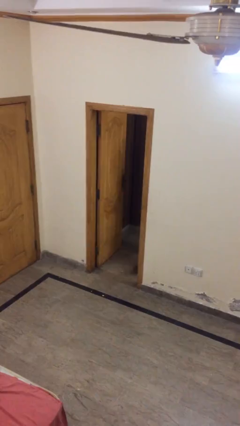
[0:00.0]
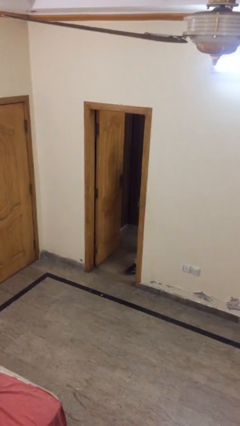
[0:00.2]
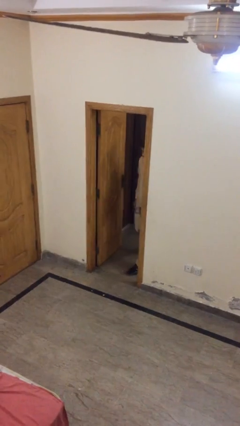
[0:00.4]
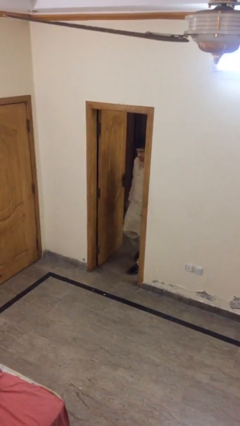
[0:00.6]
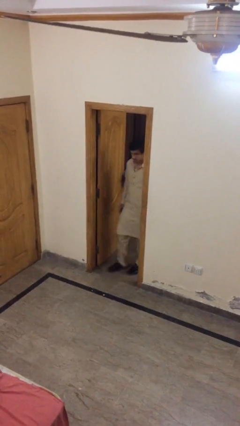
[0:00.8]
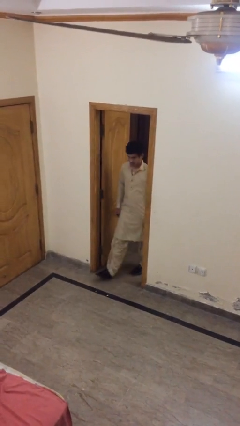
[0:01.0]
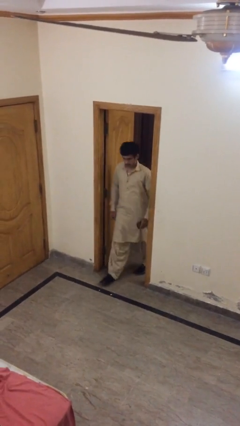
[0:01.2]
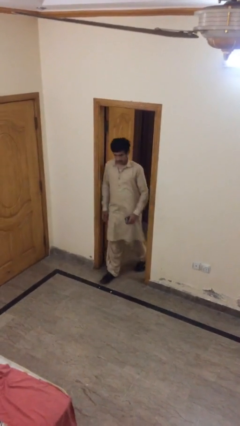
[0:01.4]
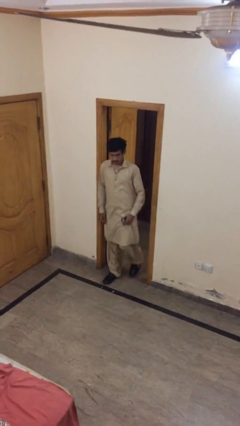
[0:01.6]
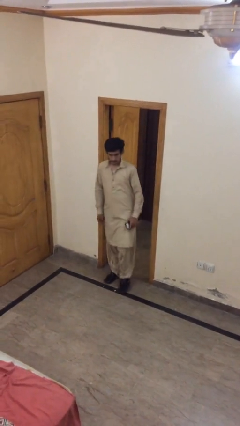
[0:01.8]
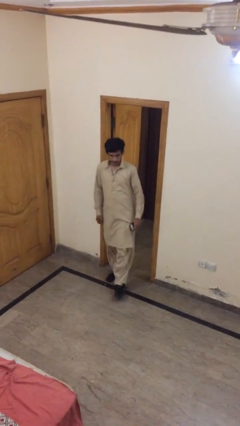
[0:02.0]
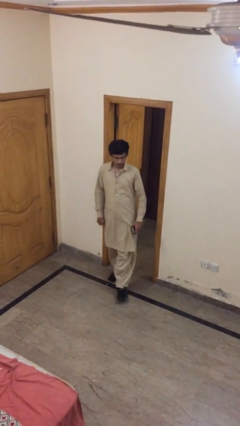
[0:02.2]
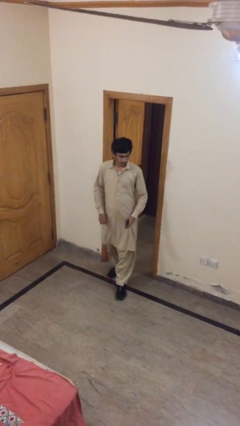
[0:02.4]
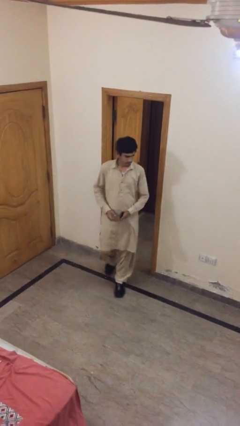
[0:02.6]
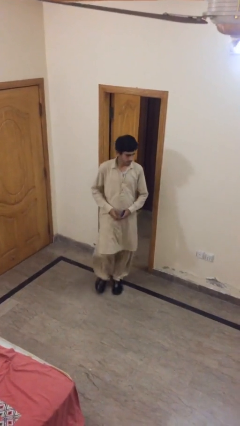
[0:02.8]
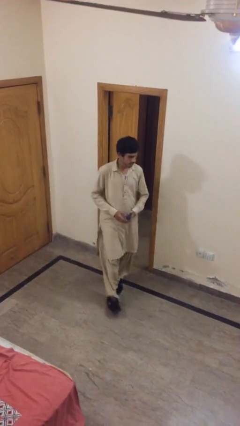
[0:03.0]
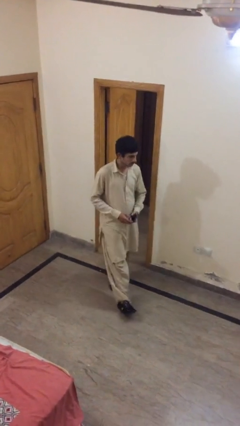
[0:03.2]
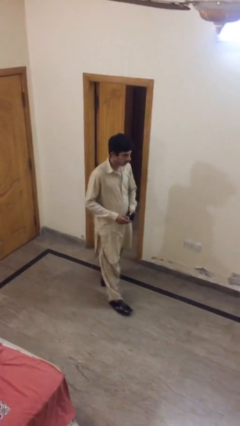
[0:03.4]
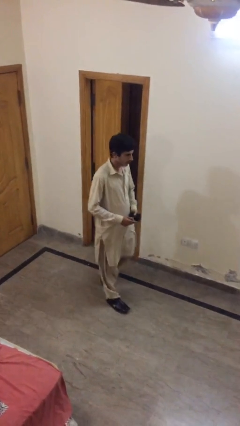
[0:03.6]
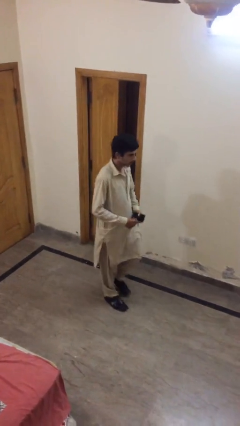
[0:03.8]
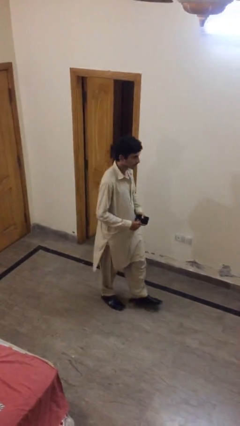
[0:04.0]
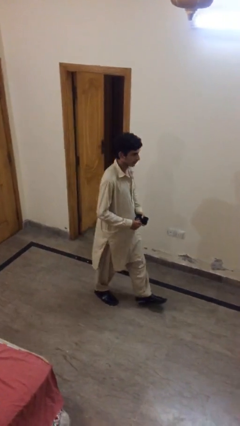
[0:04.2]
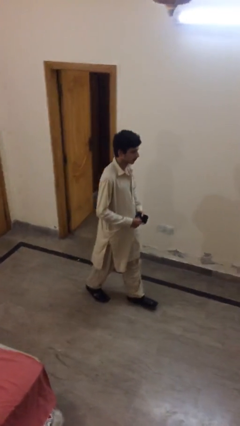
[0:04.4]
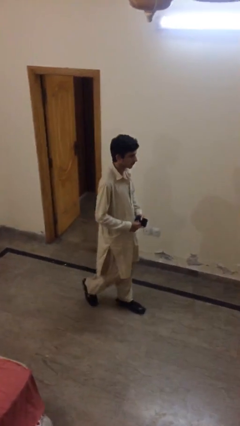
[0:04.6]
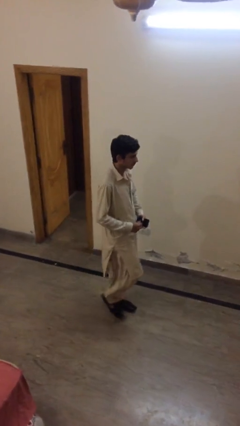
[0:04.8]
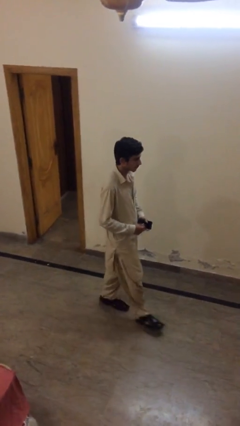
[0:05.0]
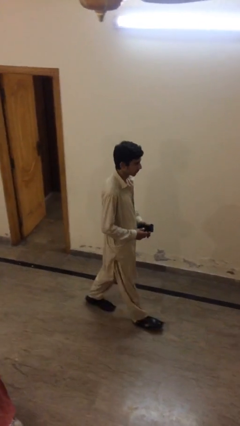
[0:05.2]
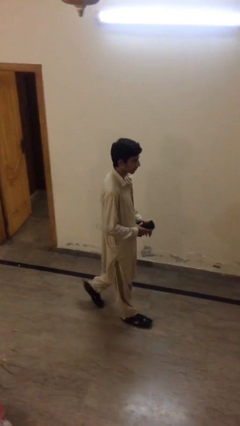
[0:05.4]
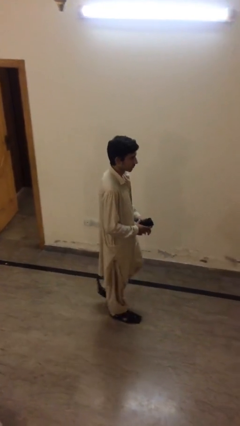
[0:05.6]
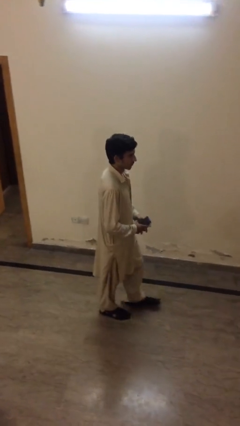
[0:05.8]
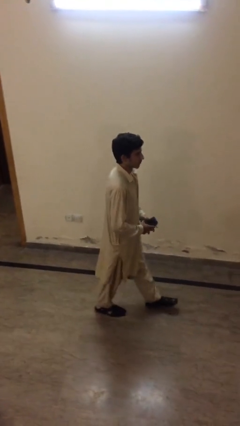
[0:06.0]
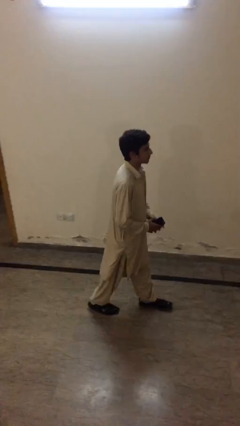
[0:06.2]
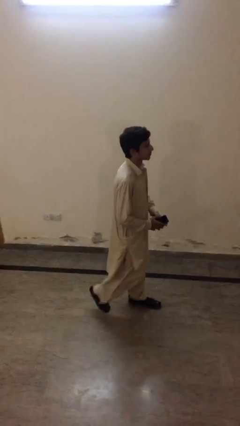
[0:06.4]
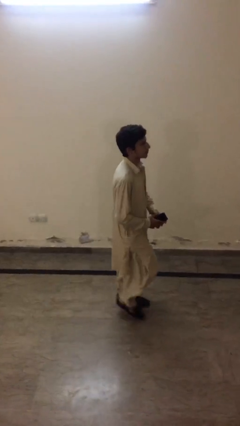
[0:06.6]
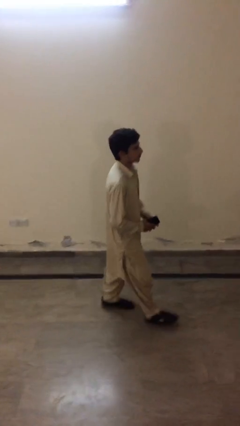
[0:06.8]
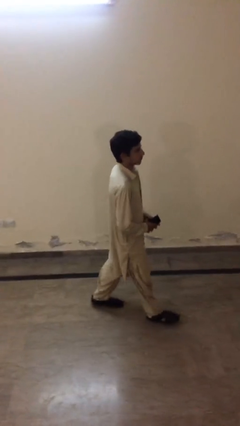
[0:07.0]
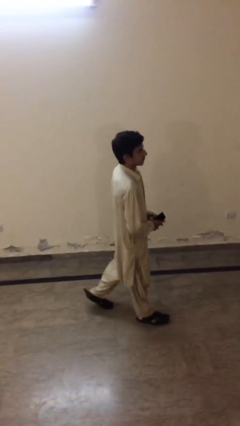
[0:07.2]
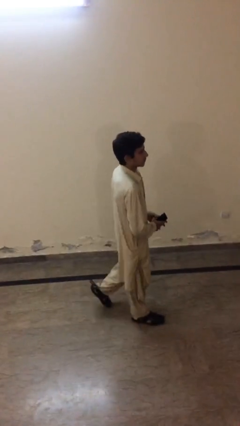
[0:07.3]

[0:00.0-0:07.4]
person enters scene through structure

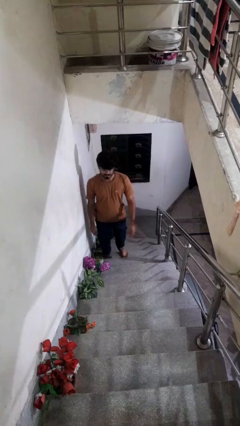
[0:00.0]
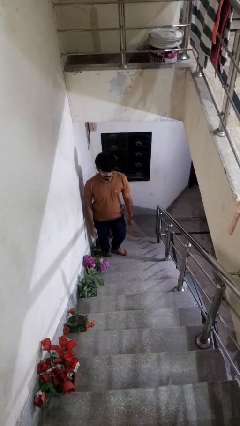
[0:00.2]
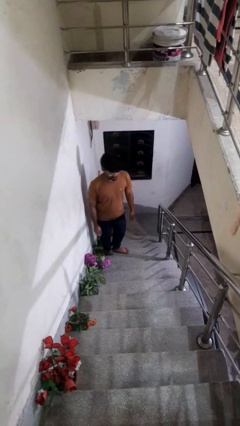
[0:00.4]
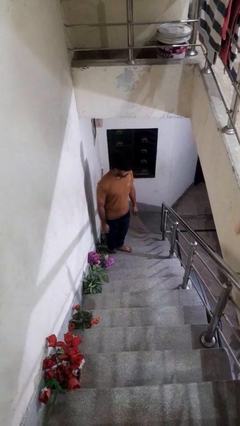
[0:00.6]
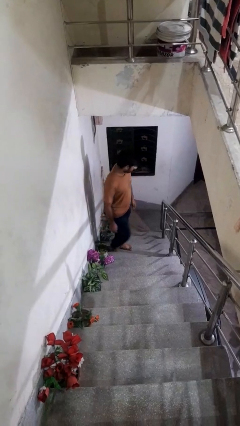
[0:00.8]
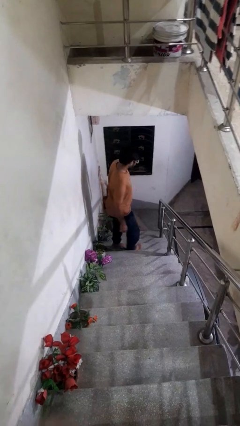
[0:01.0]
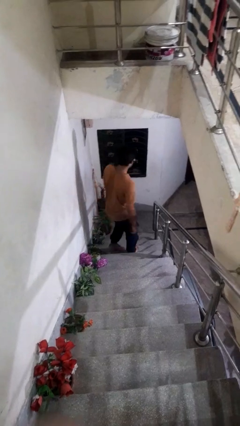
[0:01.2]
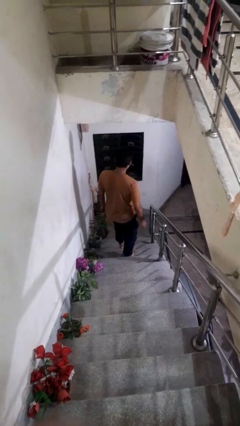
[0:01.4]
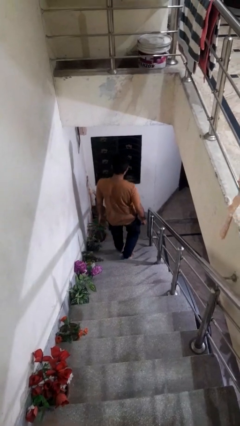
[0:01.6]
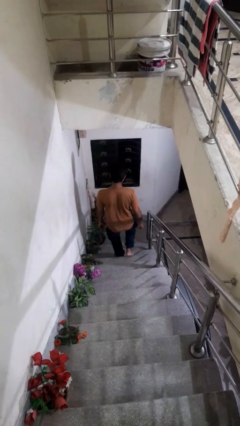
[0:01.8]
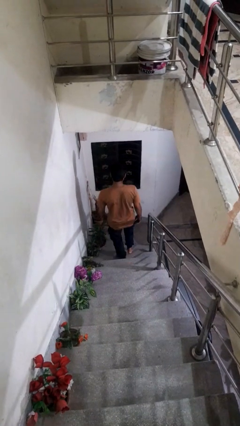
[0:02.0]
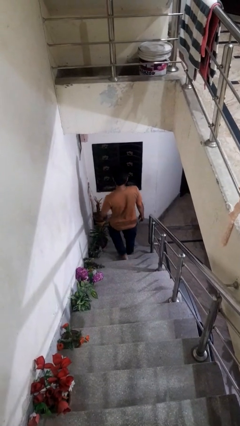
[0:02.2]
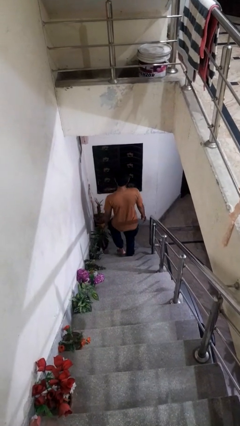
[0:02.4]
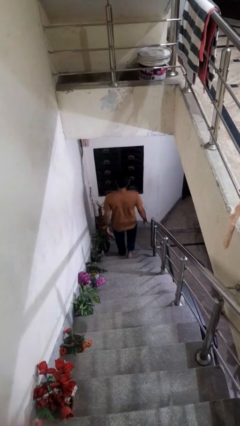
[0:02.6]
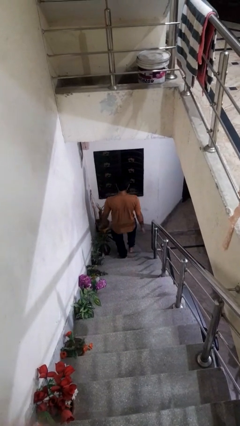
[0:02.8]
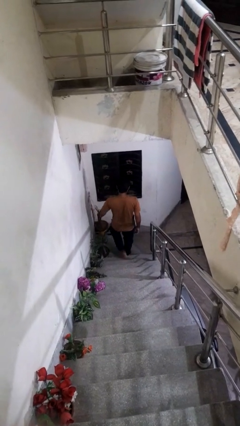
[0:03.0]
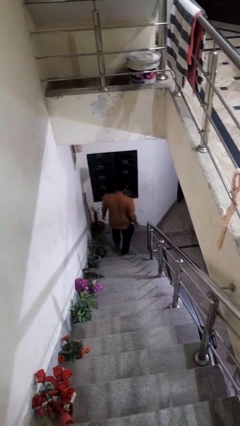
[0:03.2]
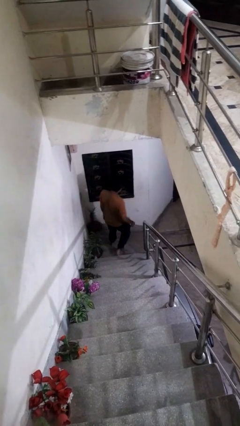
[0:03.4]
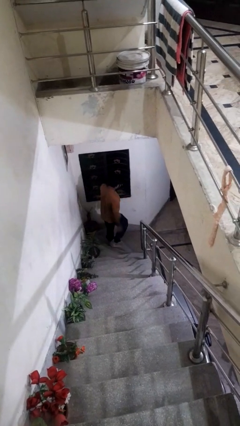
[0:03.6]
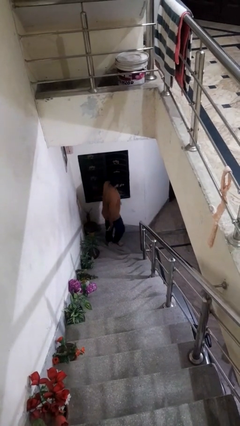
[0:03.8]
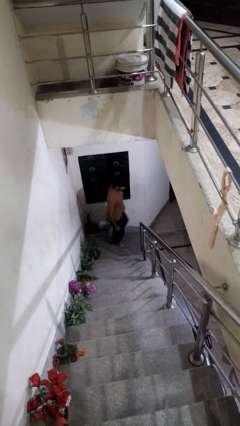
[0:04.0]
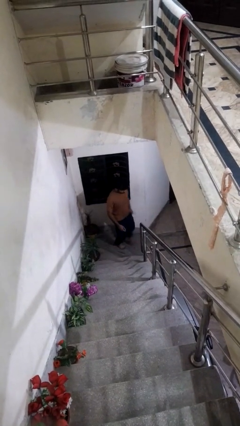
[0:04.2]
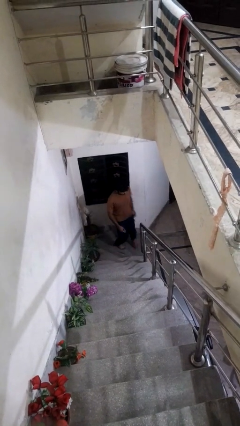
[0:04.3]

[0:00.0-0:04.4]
person climbs down stairs

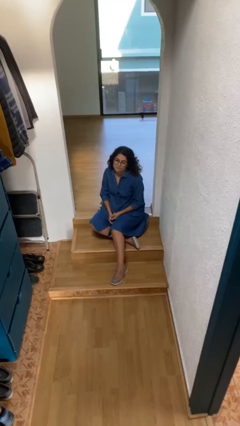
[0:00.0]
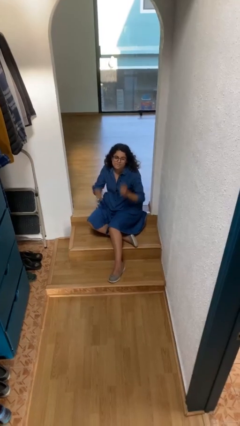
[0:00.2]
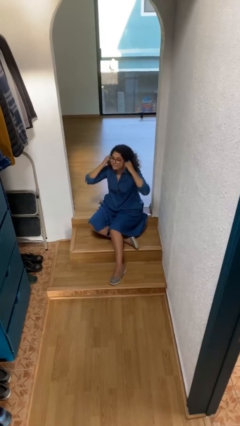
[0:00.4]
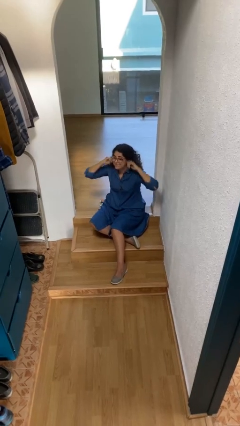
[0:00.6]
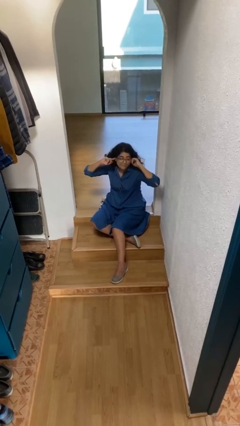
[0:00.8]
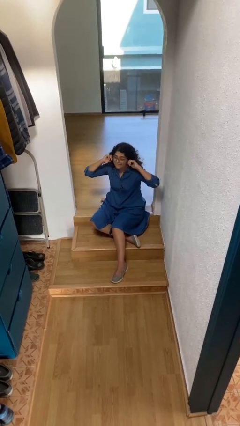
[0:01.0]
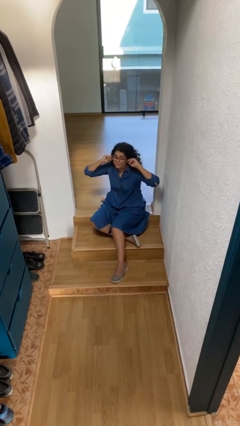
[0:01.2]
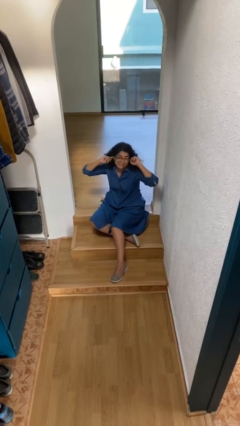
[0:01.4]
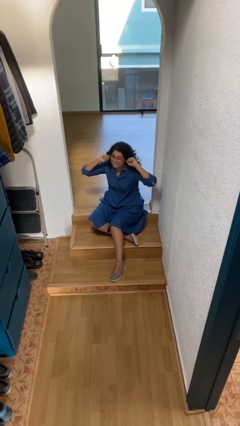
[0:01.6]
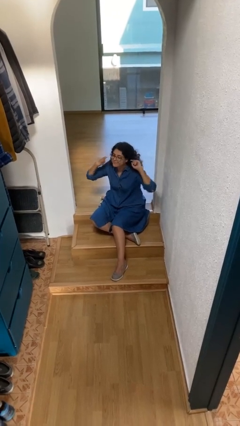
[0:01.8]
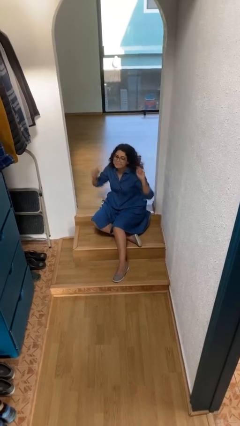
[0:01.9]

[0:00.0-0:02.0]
person puts fingers in ear

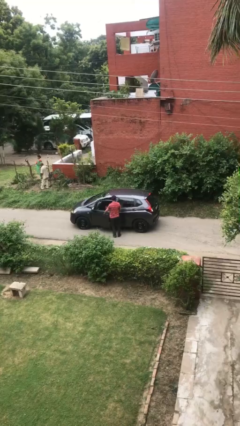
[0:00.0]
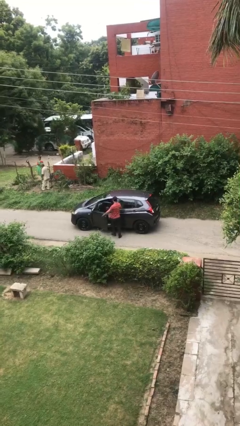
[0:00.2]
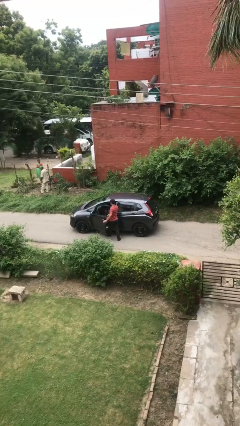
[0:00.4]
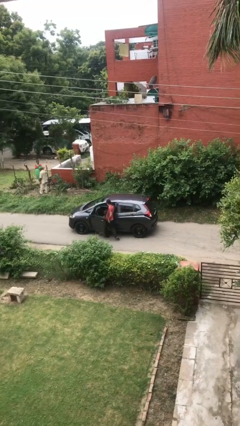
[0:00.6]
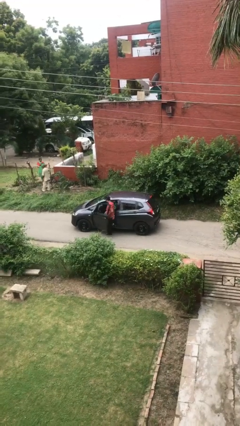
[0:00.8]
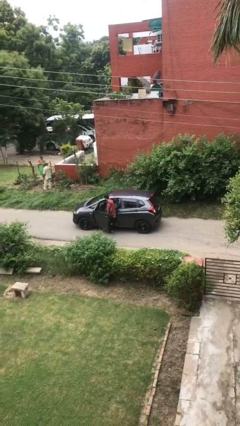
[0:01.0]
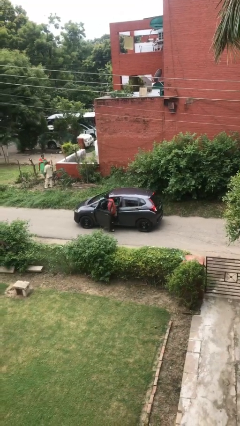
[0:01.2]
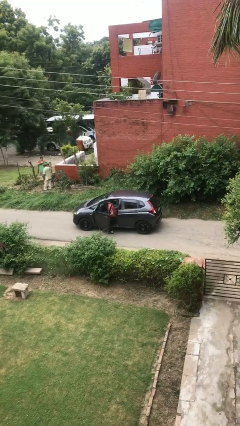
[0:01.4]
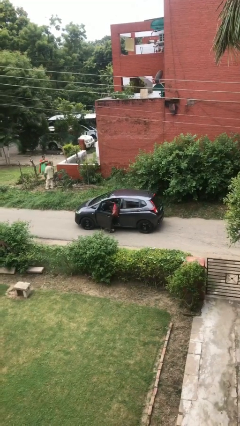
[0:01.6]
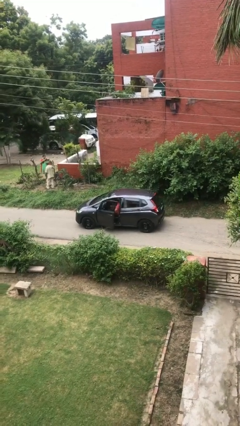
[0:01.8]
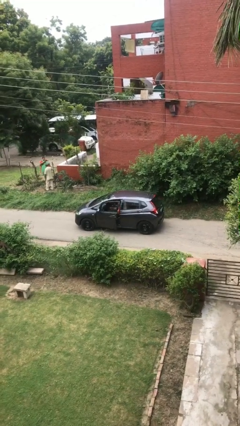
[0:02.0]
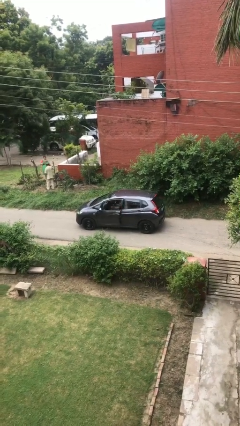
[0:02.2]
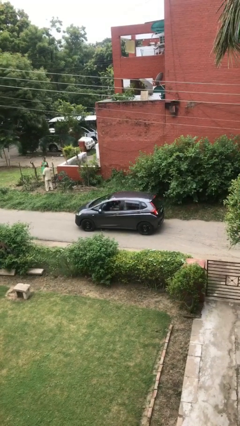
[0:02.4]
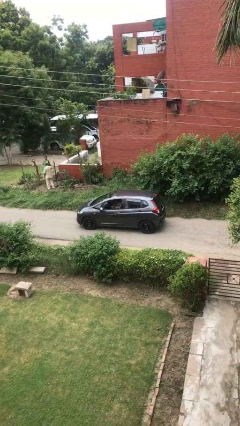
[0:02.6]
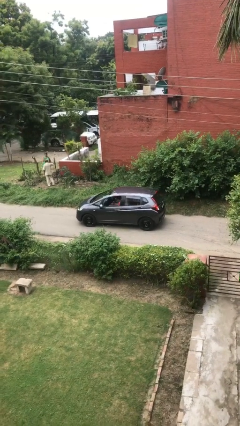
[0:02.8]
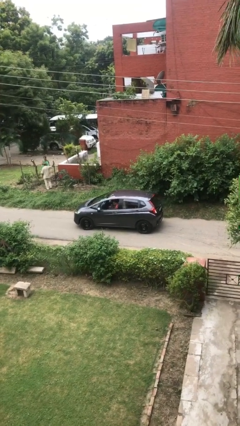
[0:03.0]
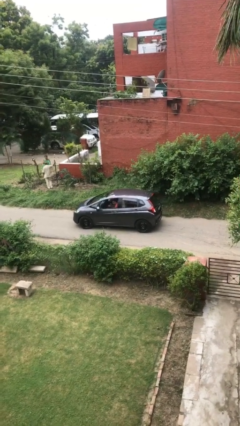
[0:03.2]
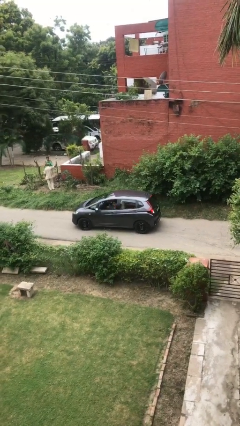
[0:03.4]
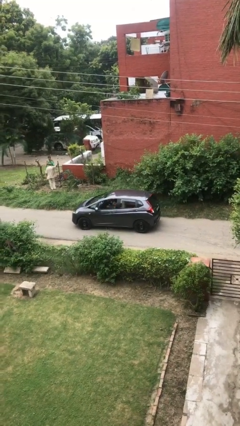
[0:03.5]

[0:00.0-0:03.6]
car picks up person
